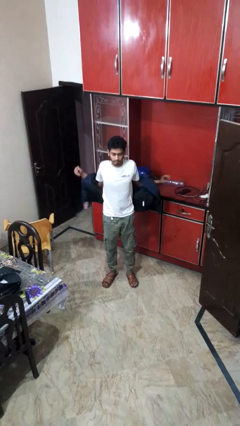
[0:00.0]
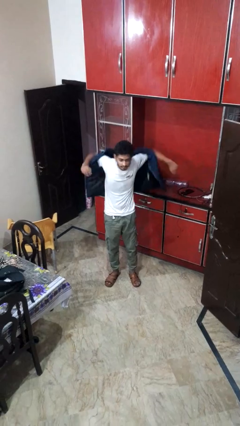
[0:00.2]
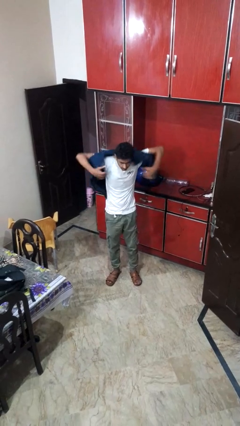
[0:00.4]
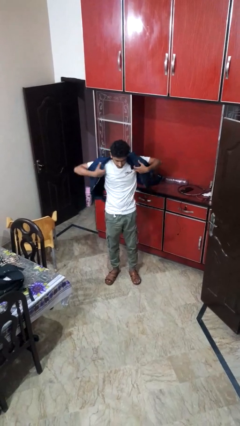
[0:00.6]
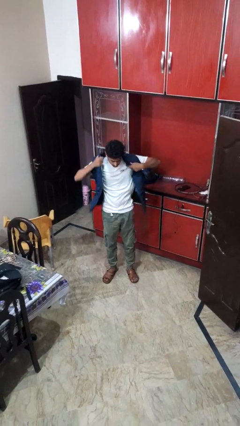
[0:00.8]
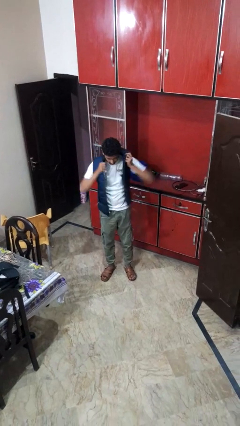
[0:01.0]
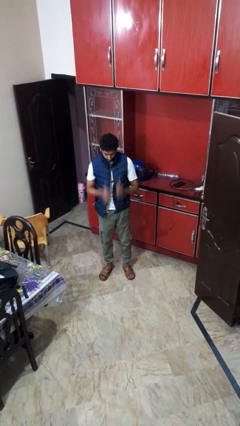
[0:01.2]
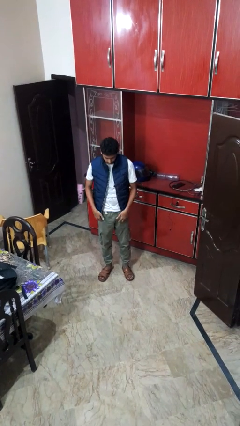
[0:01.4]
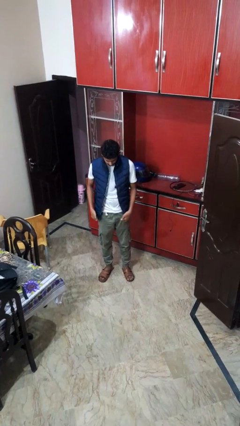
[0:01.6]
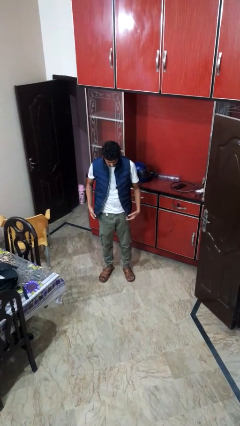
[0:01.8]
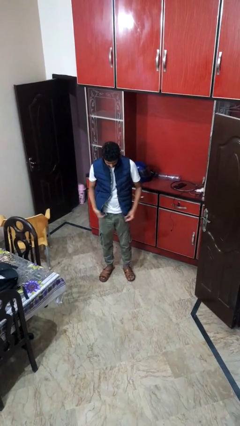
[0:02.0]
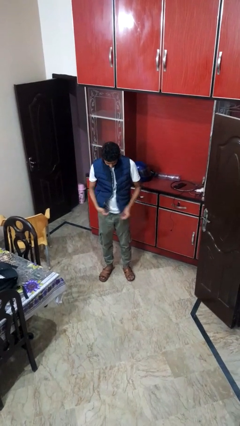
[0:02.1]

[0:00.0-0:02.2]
person puts on jacket

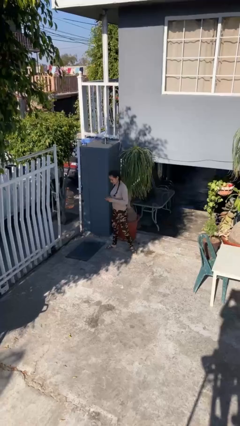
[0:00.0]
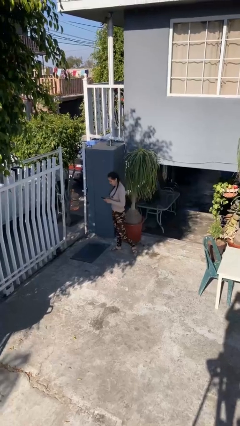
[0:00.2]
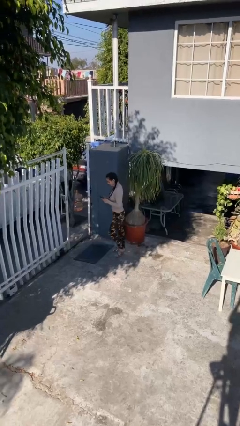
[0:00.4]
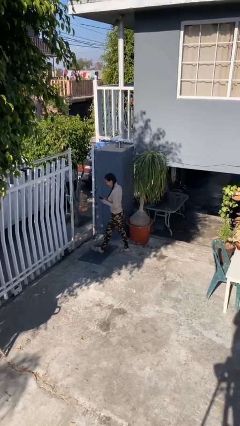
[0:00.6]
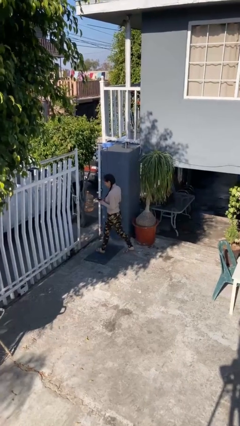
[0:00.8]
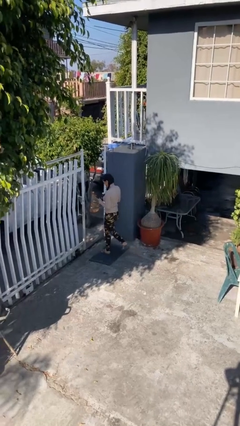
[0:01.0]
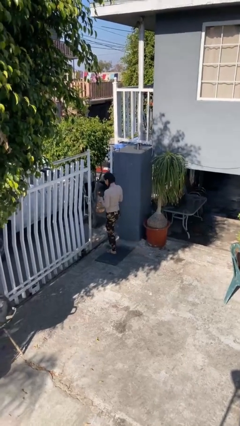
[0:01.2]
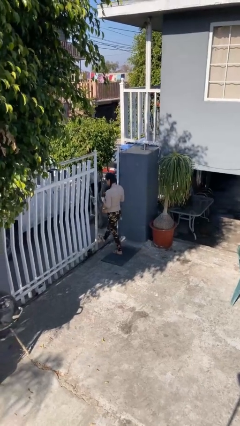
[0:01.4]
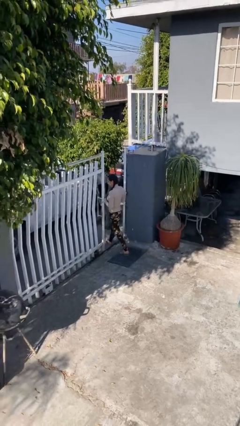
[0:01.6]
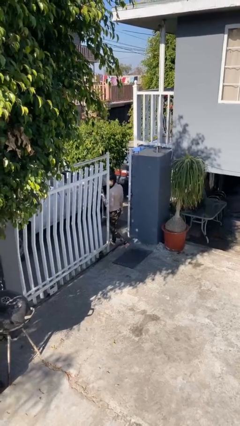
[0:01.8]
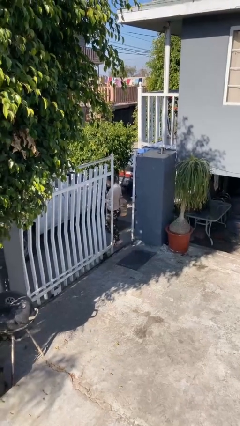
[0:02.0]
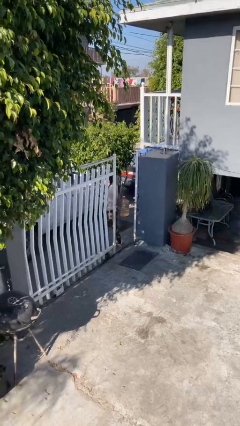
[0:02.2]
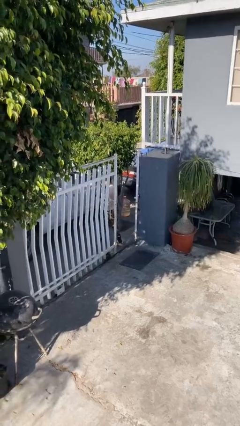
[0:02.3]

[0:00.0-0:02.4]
person exits scene through structure

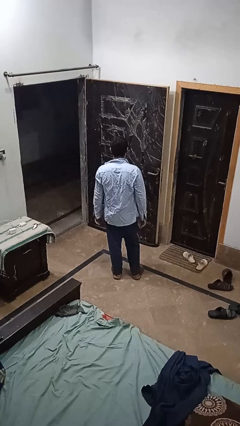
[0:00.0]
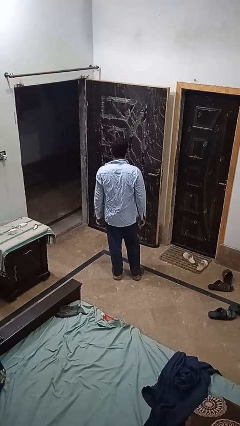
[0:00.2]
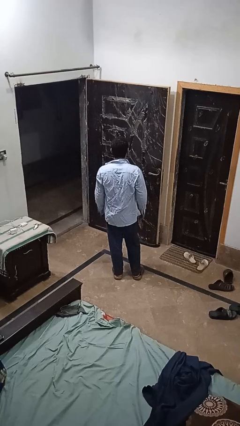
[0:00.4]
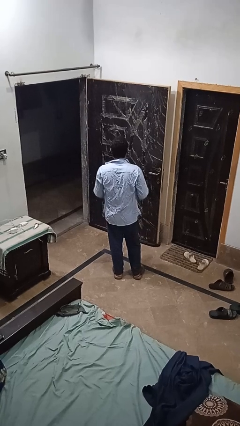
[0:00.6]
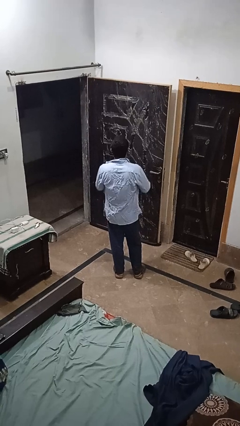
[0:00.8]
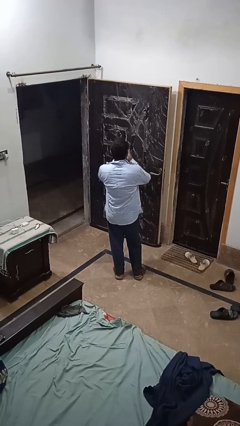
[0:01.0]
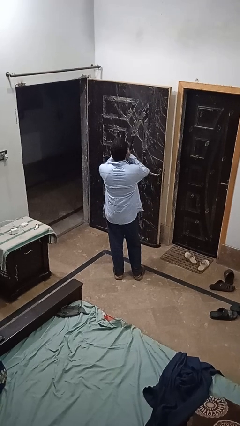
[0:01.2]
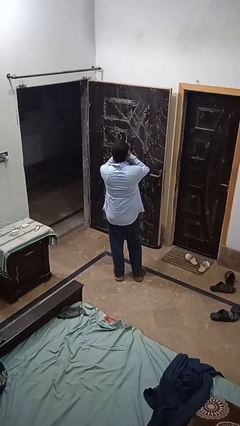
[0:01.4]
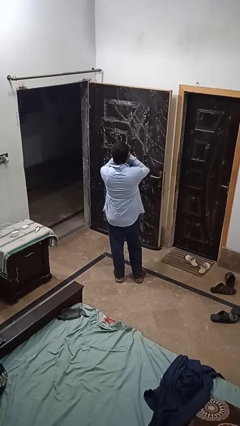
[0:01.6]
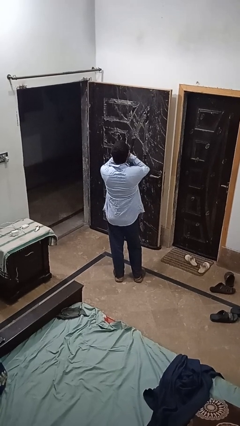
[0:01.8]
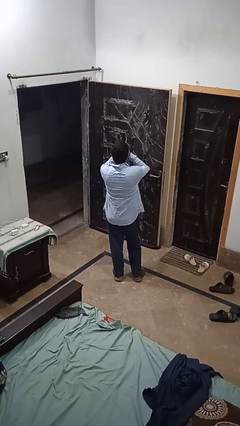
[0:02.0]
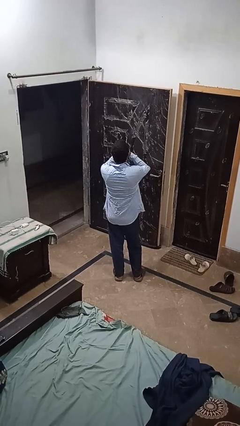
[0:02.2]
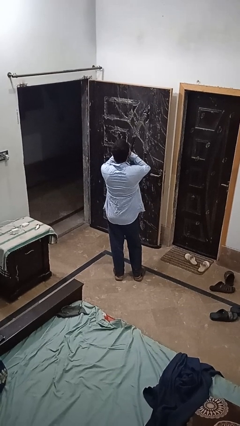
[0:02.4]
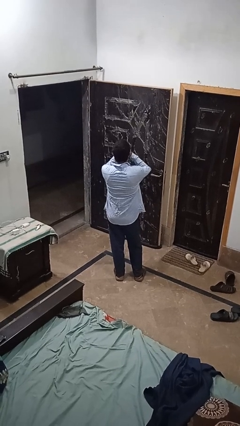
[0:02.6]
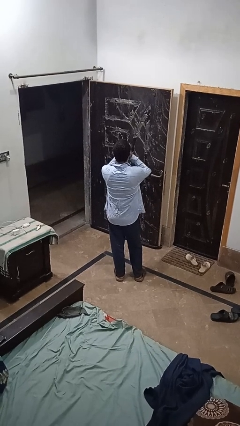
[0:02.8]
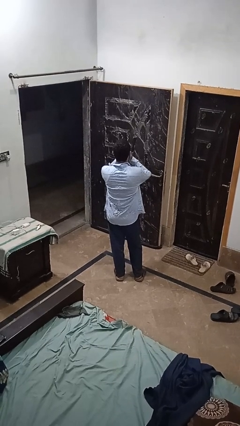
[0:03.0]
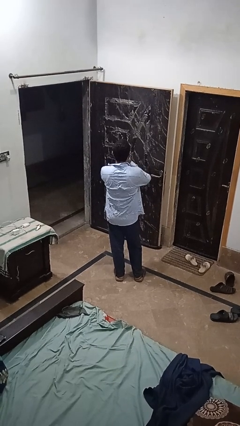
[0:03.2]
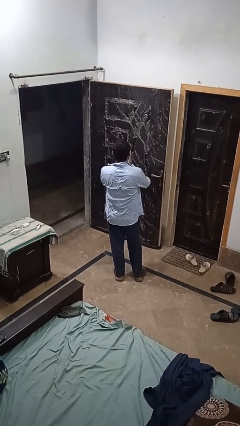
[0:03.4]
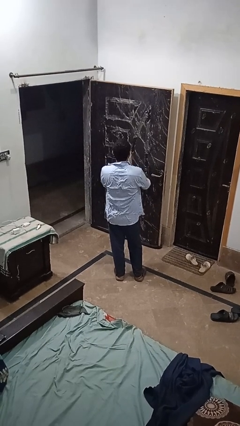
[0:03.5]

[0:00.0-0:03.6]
person yawns

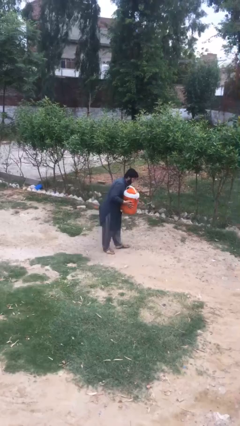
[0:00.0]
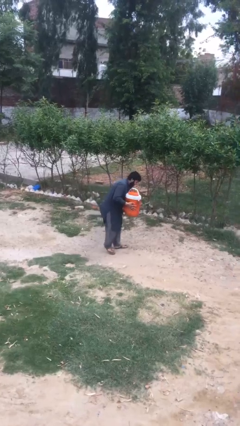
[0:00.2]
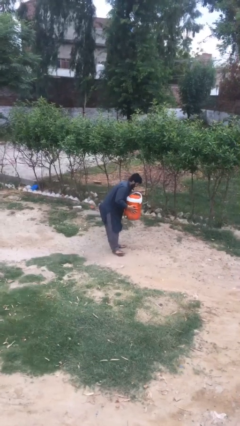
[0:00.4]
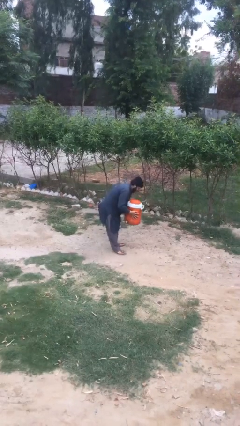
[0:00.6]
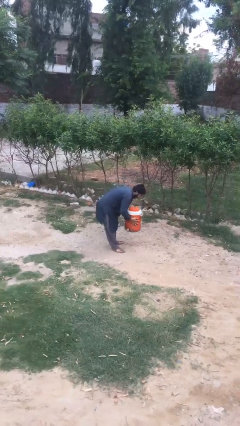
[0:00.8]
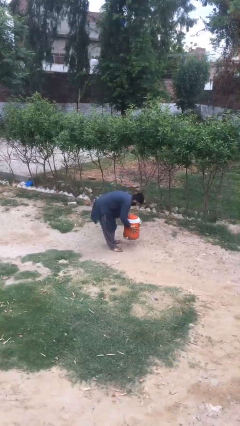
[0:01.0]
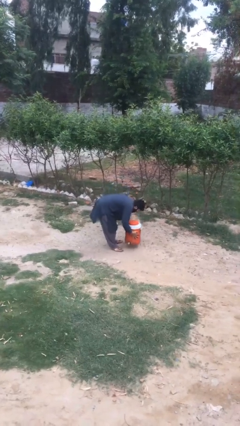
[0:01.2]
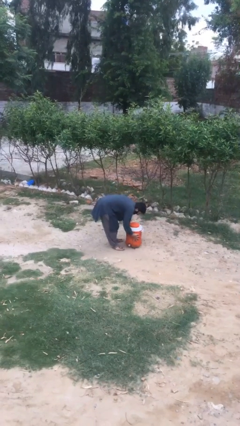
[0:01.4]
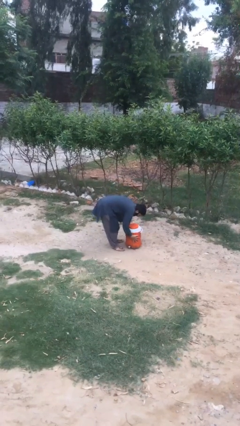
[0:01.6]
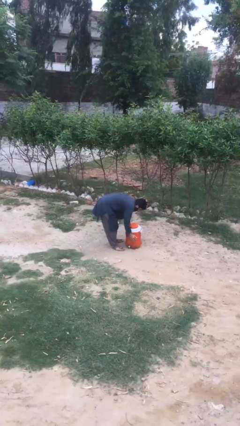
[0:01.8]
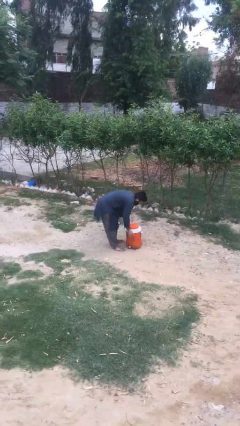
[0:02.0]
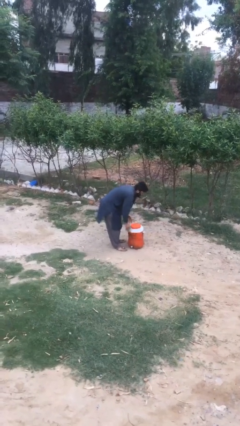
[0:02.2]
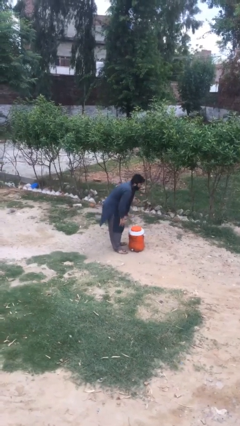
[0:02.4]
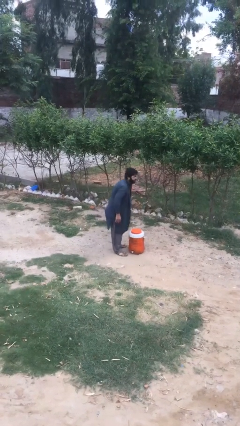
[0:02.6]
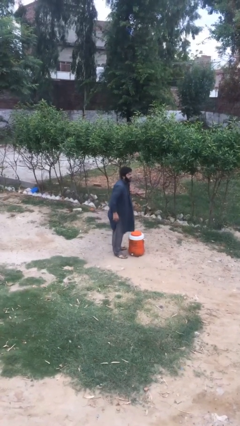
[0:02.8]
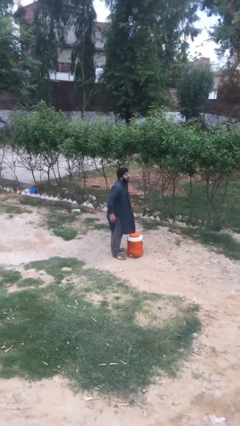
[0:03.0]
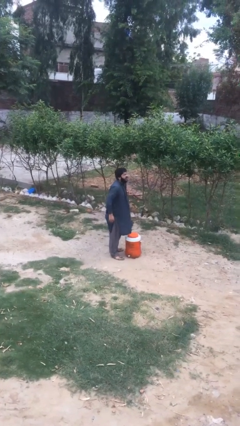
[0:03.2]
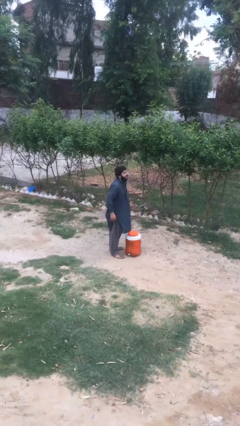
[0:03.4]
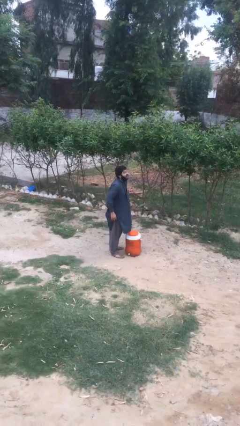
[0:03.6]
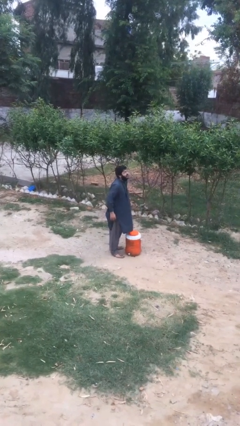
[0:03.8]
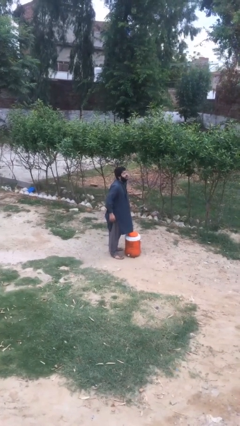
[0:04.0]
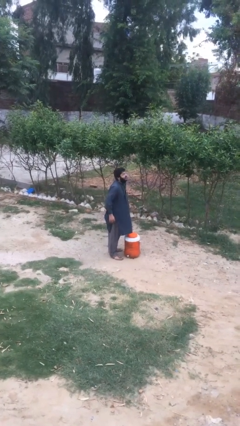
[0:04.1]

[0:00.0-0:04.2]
person puts down object on floor

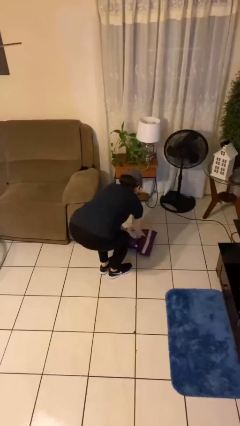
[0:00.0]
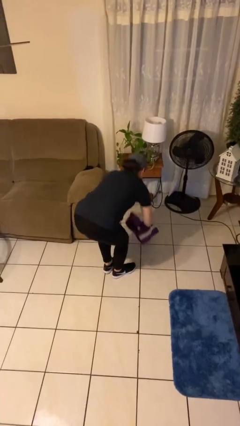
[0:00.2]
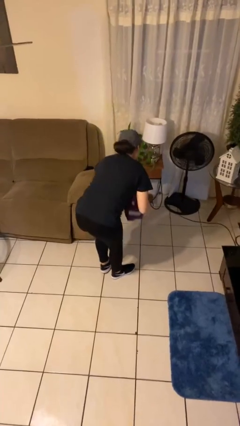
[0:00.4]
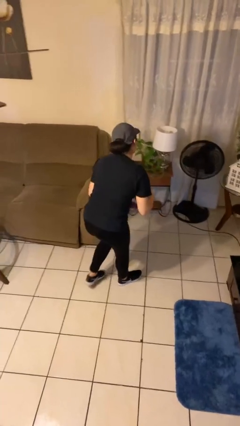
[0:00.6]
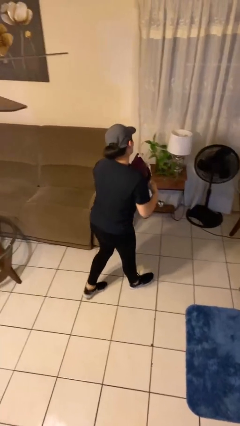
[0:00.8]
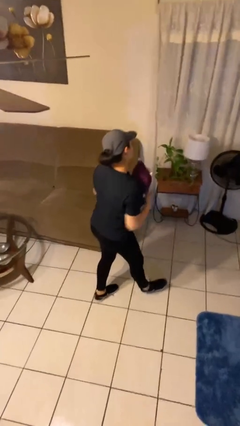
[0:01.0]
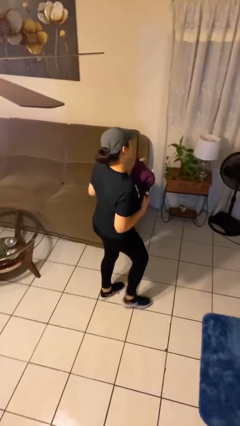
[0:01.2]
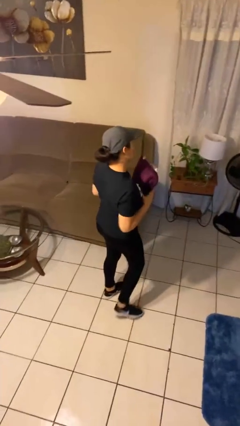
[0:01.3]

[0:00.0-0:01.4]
person picks up object from floor

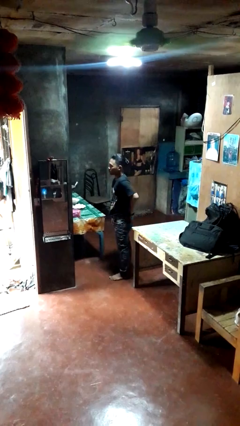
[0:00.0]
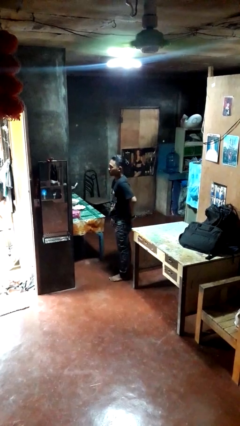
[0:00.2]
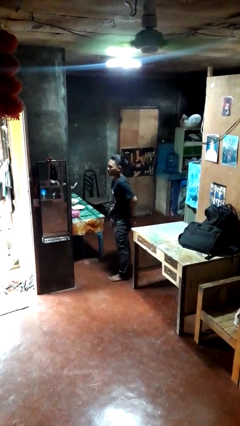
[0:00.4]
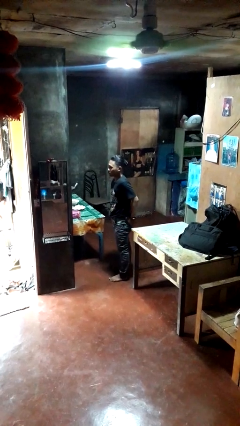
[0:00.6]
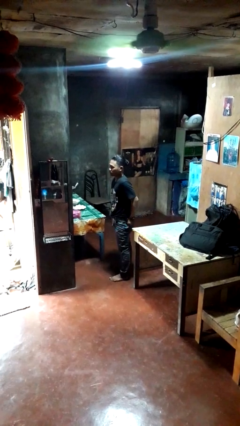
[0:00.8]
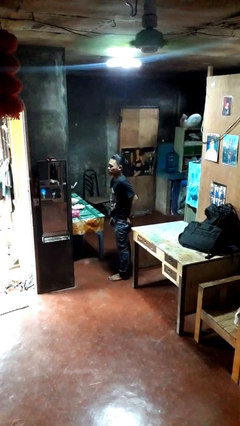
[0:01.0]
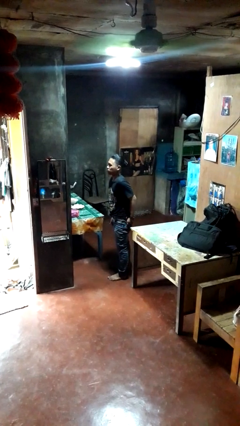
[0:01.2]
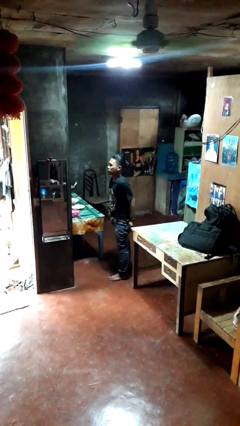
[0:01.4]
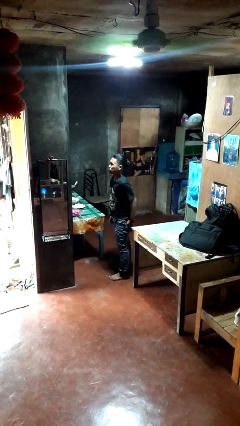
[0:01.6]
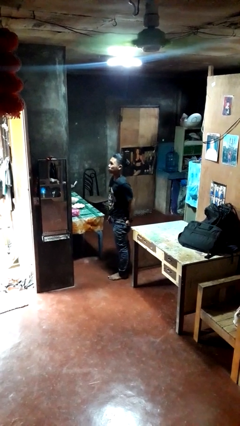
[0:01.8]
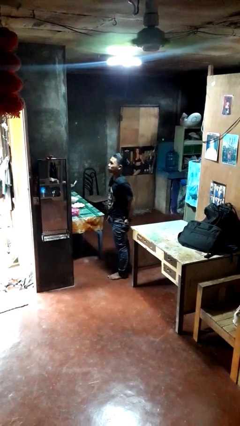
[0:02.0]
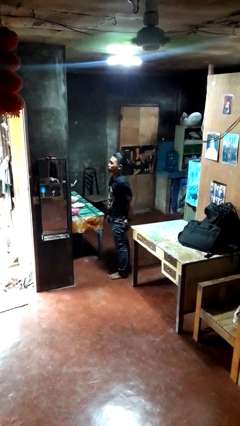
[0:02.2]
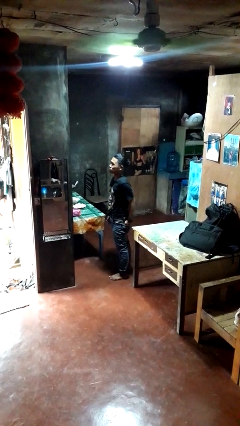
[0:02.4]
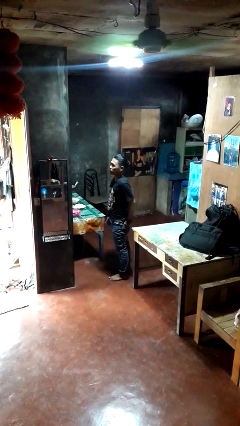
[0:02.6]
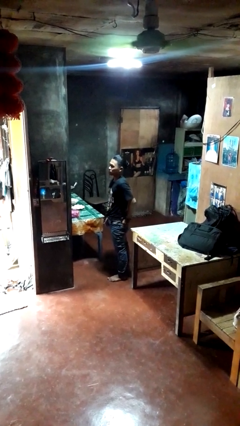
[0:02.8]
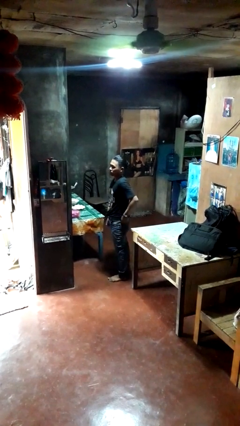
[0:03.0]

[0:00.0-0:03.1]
person puts hands in back pockets

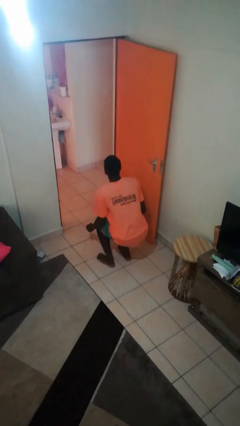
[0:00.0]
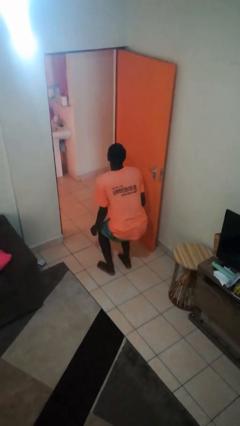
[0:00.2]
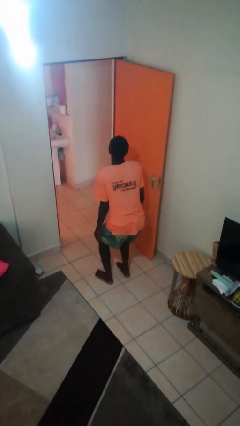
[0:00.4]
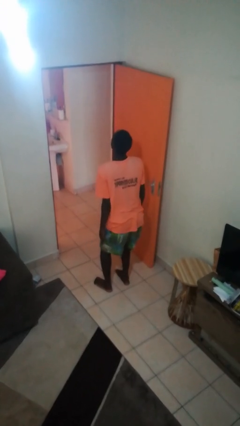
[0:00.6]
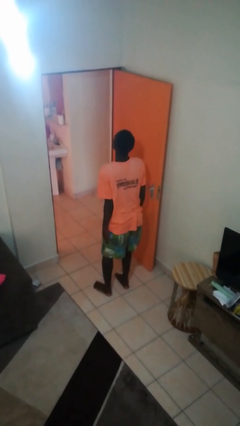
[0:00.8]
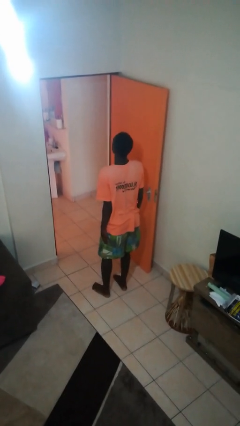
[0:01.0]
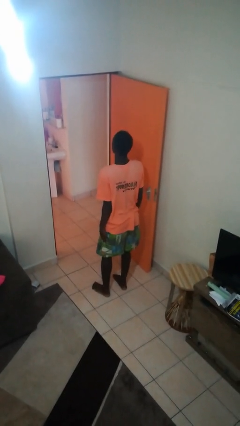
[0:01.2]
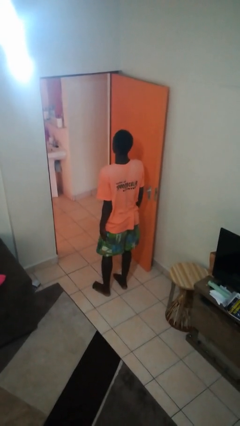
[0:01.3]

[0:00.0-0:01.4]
person stands up
